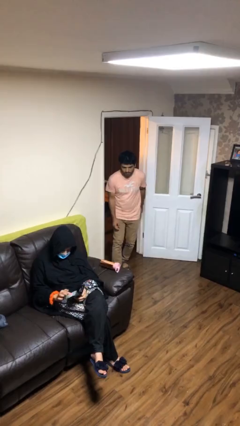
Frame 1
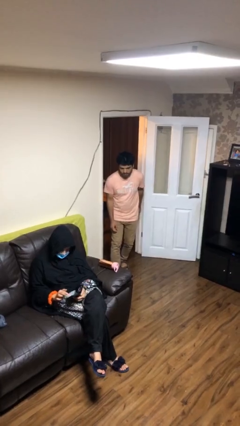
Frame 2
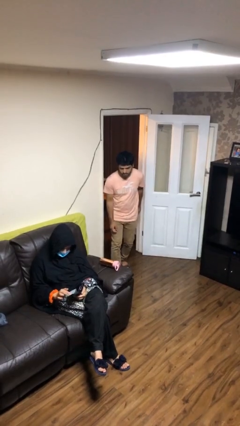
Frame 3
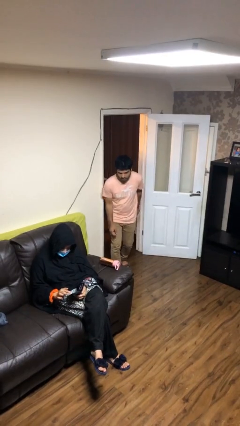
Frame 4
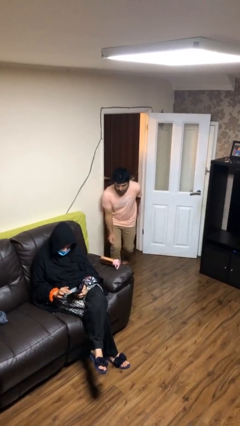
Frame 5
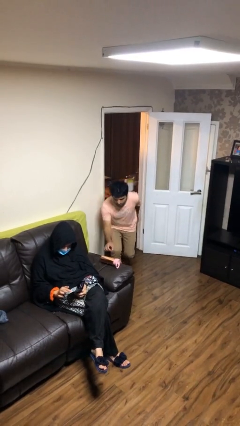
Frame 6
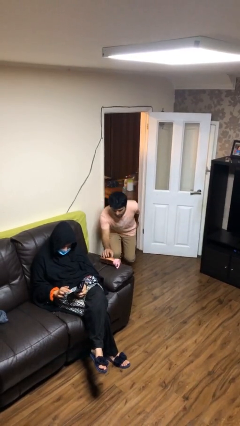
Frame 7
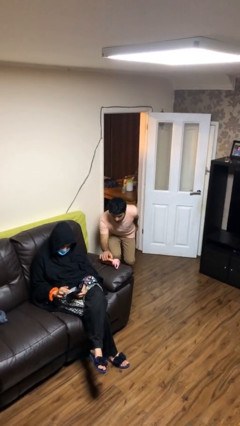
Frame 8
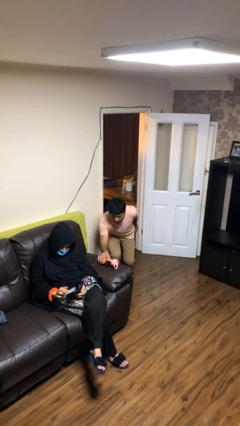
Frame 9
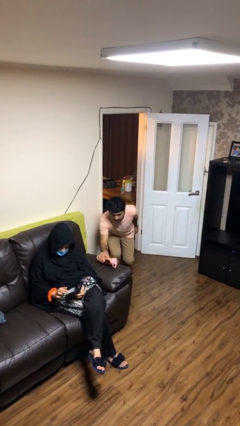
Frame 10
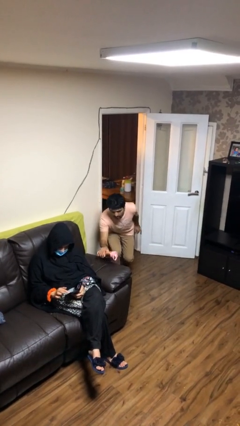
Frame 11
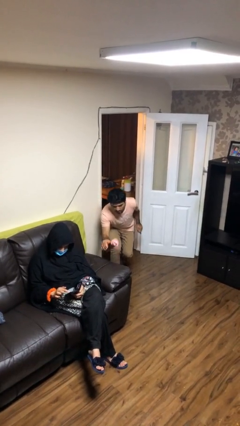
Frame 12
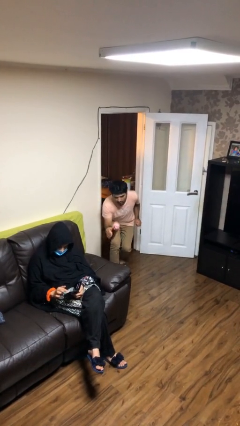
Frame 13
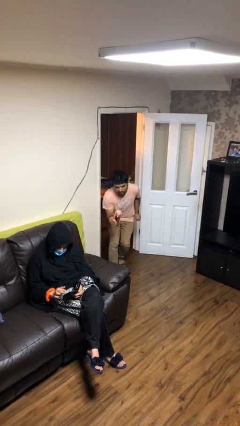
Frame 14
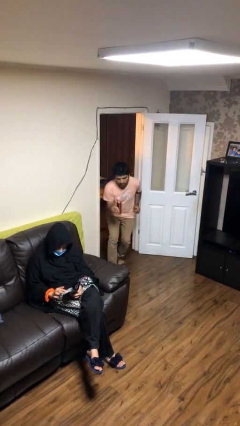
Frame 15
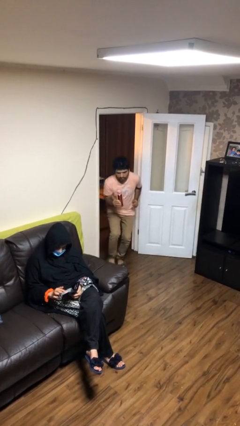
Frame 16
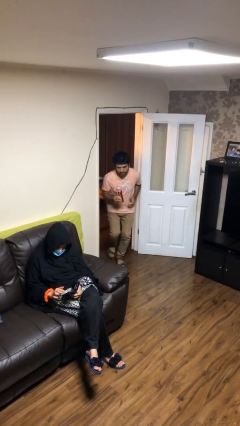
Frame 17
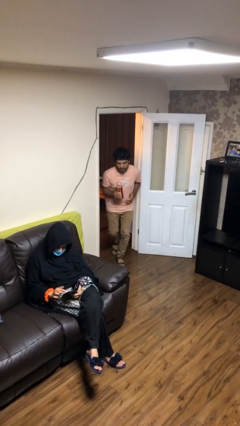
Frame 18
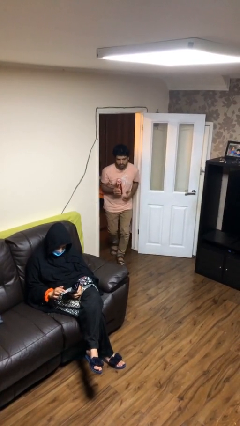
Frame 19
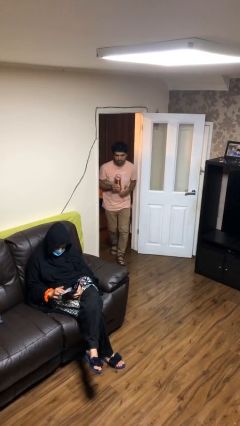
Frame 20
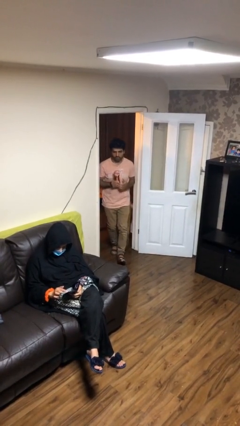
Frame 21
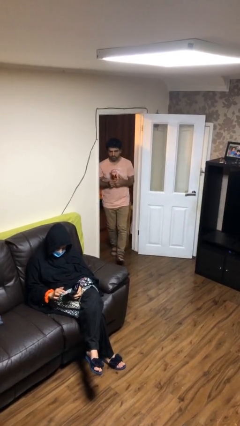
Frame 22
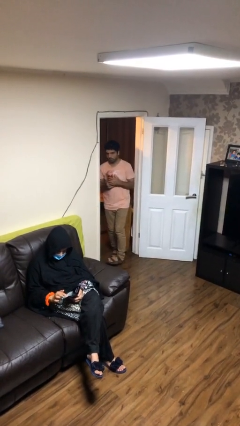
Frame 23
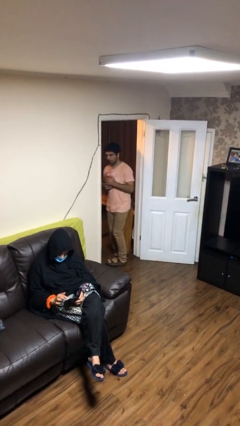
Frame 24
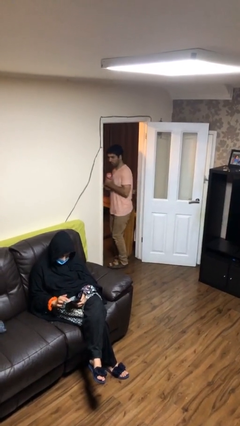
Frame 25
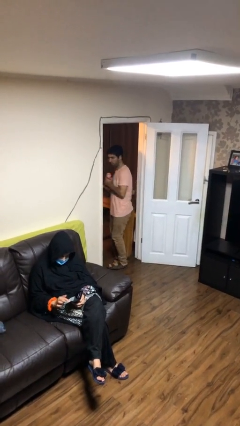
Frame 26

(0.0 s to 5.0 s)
person steals object from person

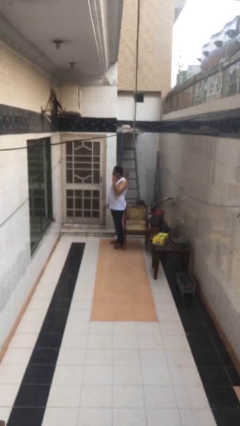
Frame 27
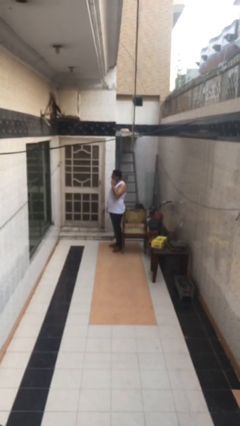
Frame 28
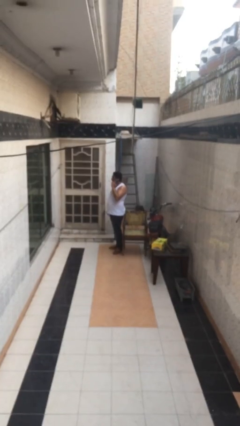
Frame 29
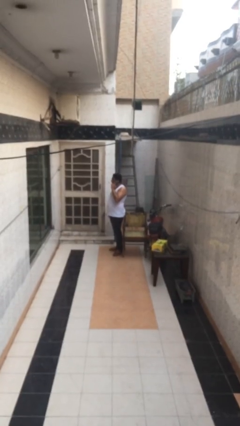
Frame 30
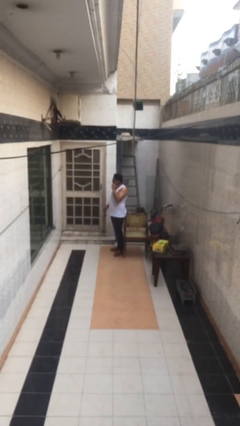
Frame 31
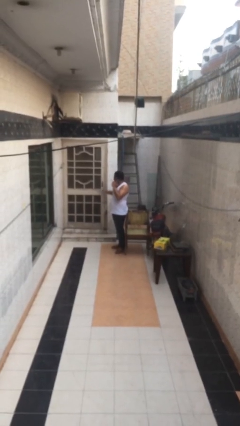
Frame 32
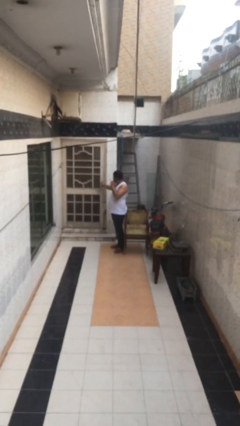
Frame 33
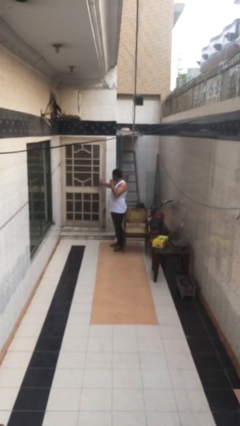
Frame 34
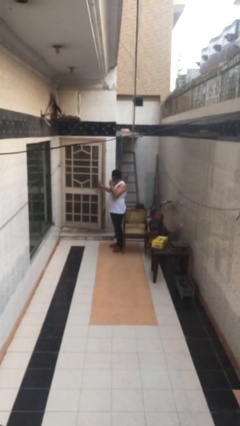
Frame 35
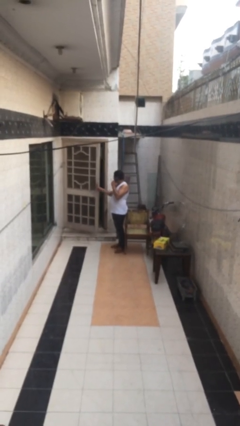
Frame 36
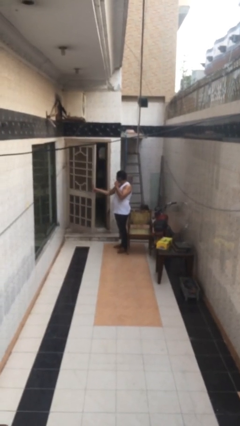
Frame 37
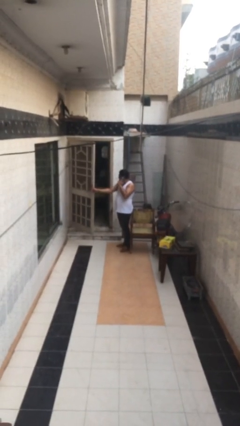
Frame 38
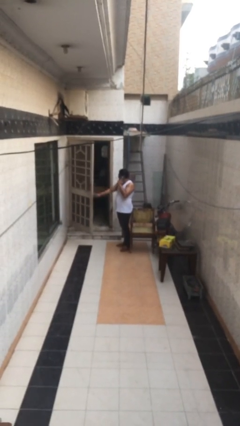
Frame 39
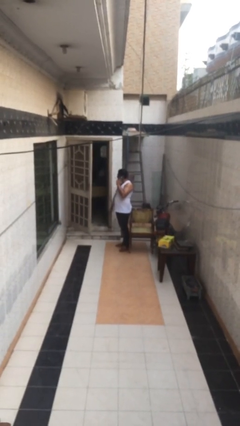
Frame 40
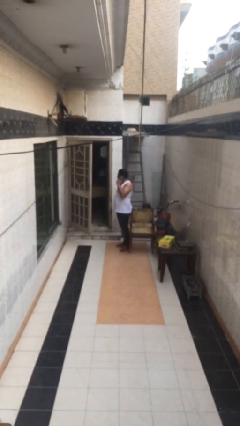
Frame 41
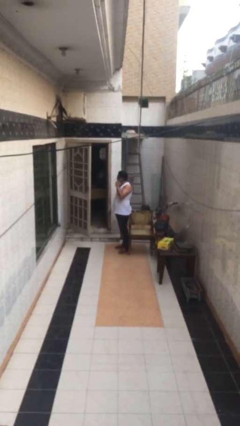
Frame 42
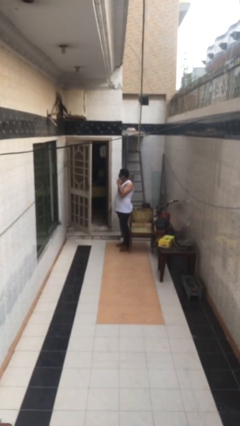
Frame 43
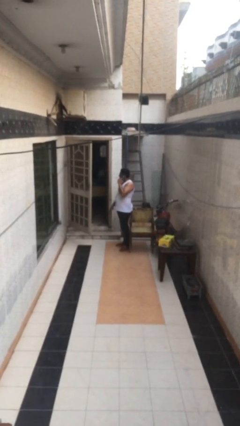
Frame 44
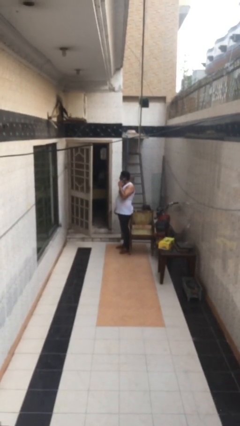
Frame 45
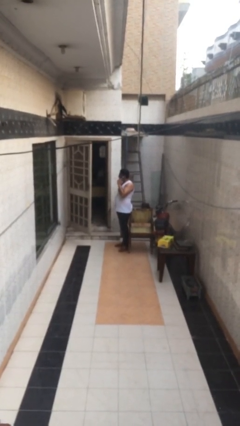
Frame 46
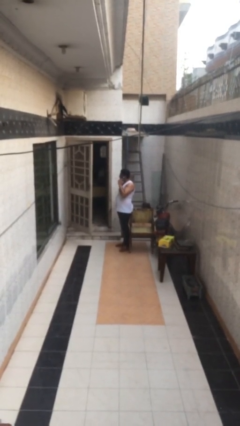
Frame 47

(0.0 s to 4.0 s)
person opens facility door

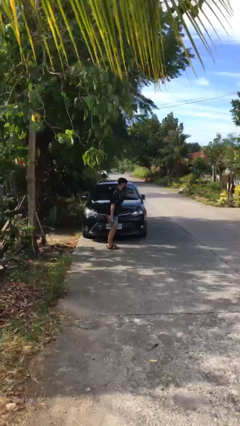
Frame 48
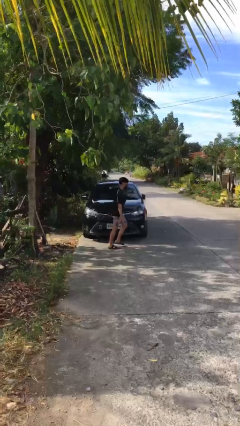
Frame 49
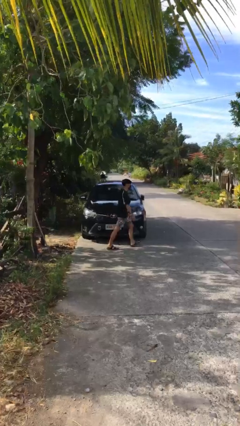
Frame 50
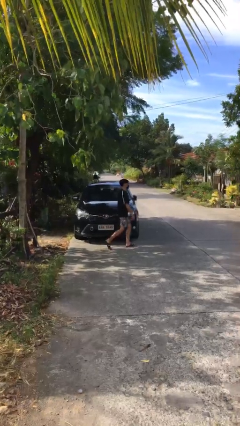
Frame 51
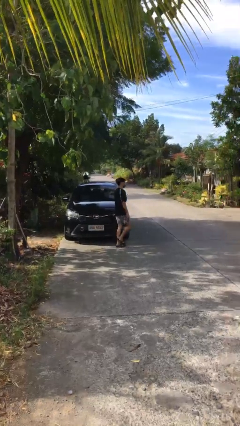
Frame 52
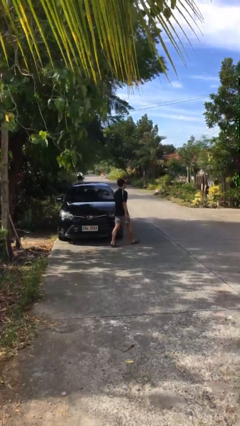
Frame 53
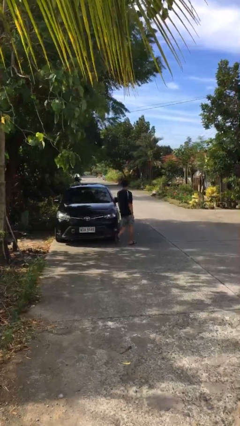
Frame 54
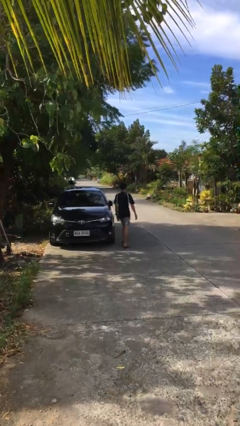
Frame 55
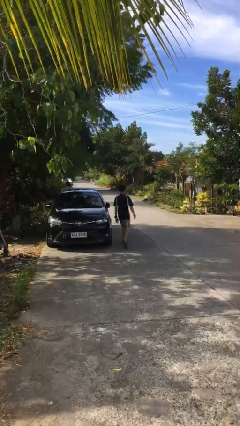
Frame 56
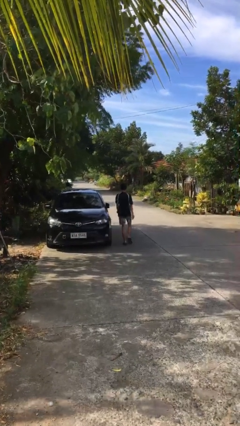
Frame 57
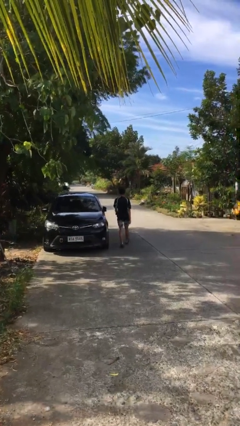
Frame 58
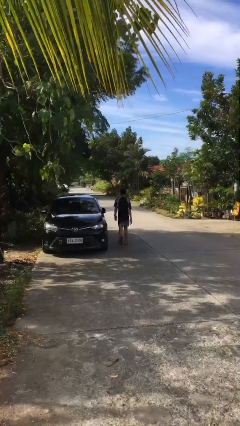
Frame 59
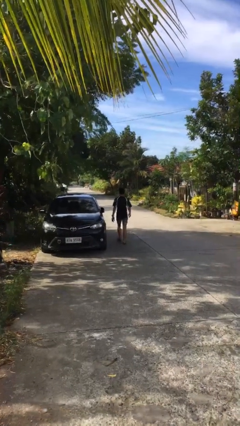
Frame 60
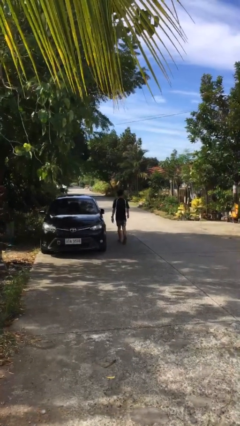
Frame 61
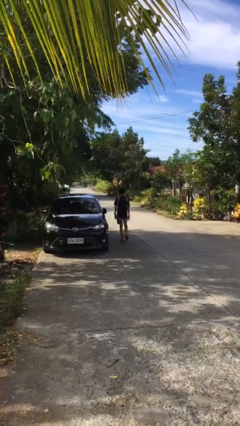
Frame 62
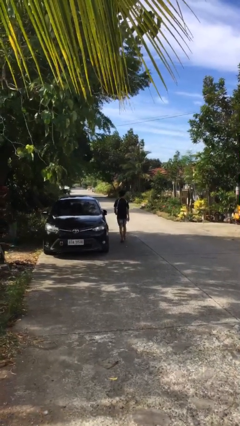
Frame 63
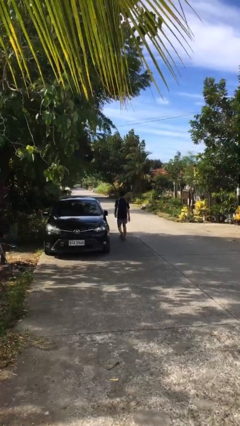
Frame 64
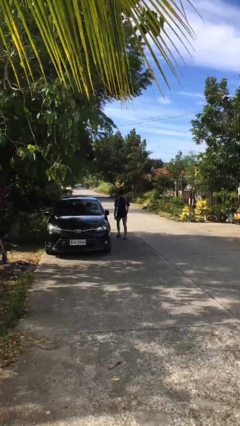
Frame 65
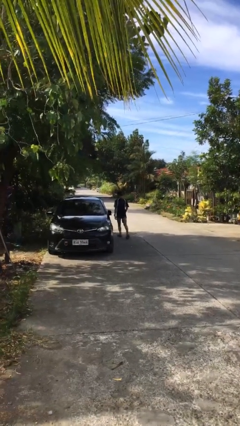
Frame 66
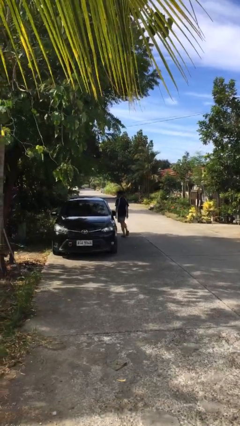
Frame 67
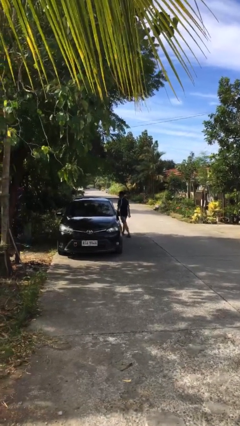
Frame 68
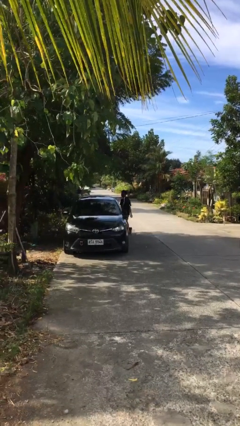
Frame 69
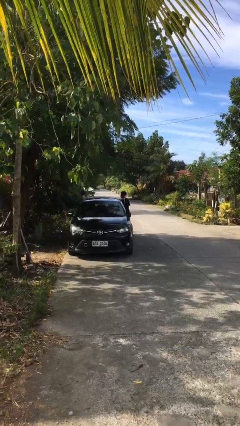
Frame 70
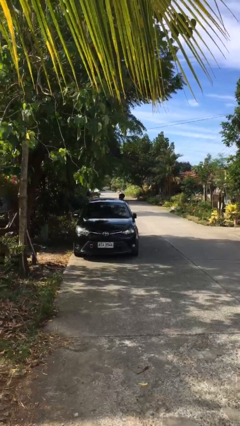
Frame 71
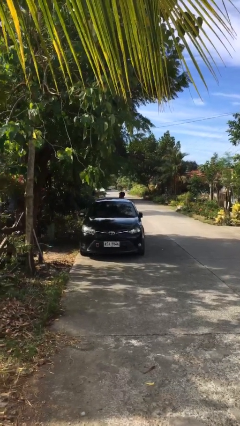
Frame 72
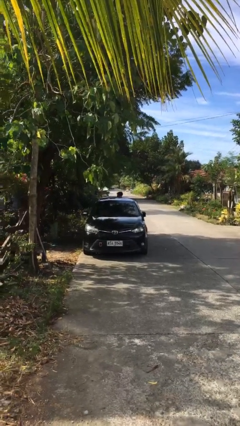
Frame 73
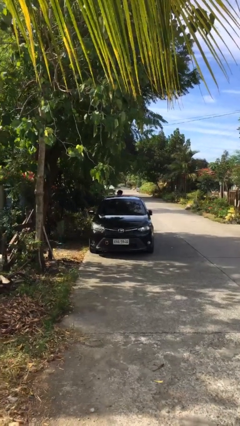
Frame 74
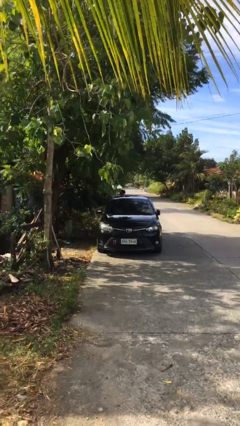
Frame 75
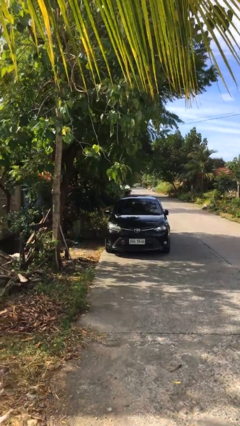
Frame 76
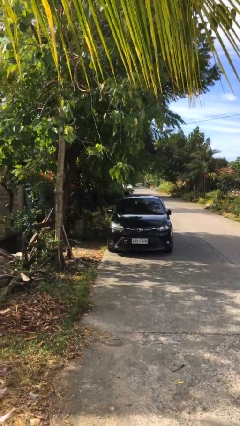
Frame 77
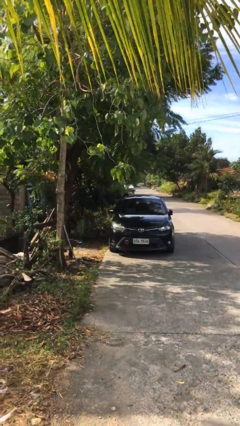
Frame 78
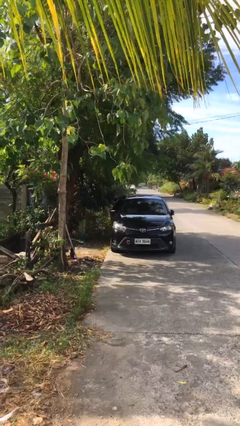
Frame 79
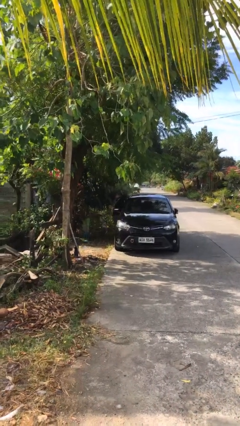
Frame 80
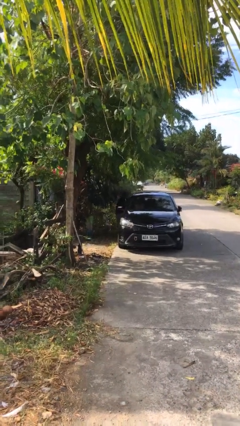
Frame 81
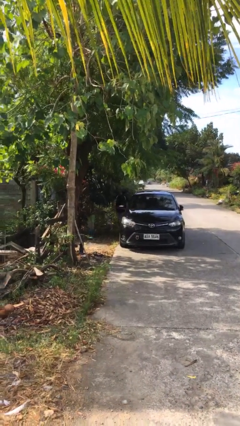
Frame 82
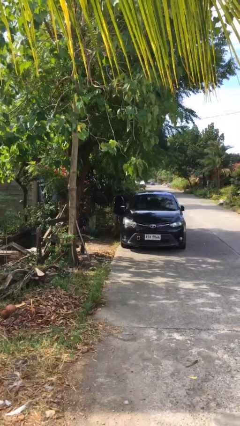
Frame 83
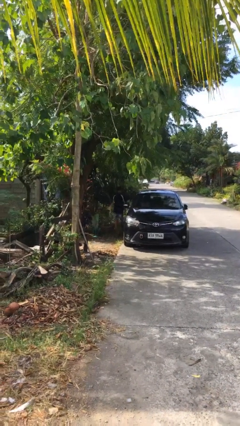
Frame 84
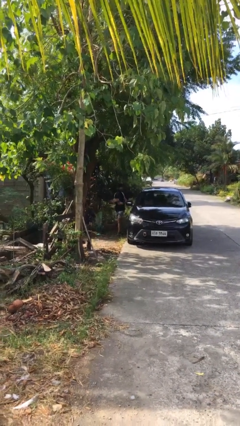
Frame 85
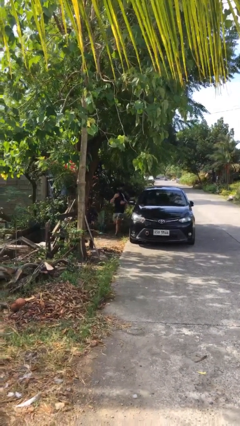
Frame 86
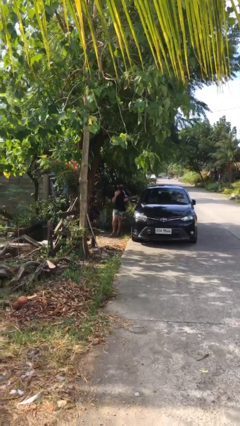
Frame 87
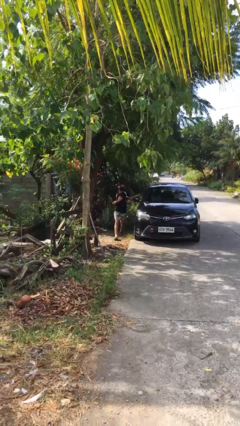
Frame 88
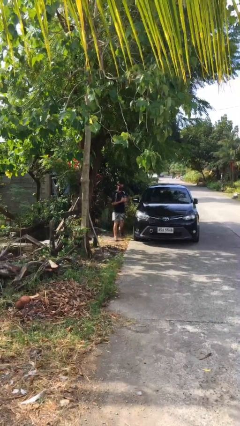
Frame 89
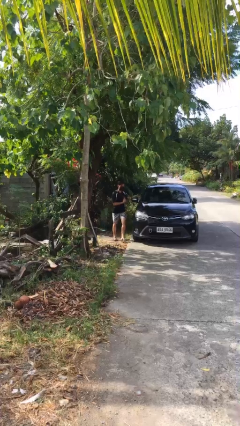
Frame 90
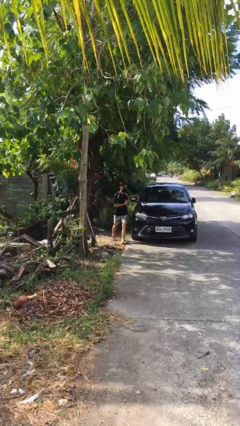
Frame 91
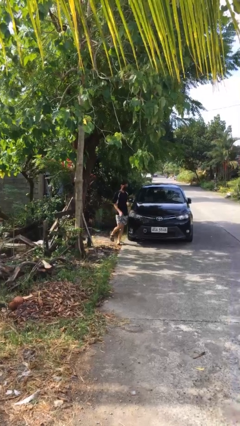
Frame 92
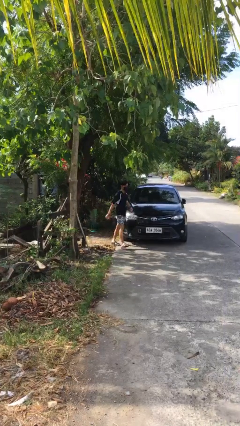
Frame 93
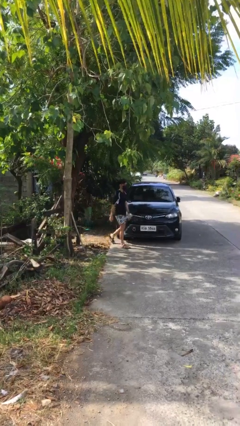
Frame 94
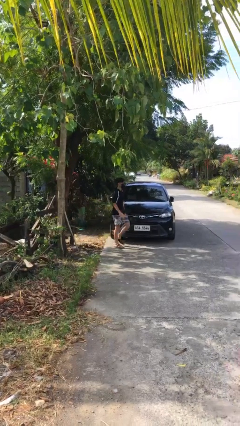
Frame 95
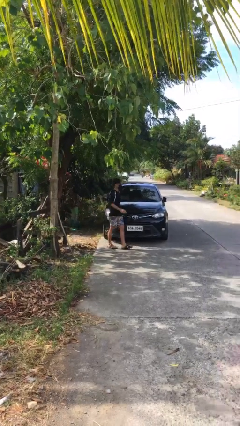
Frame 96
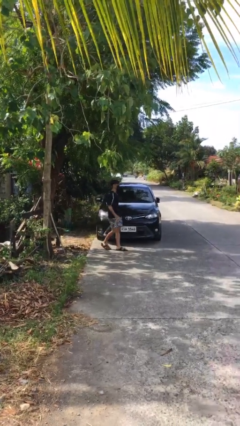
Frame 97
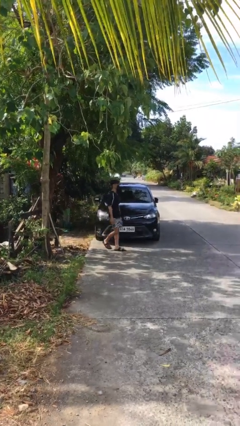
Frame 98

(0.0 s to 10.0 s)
person walks around car
